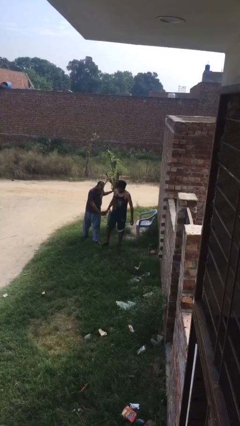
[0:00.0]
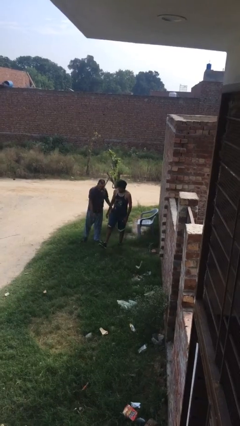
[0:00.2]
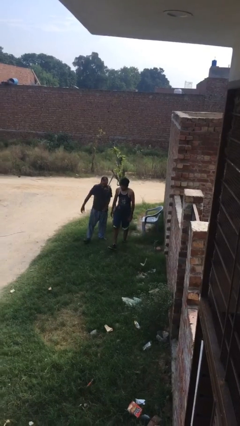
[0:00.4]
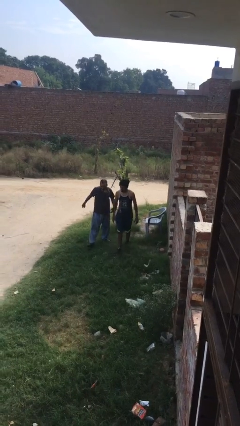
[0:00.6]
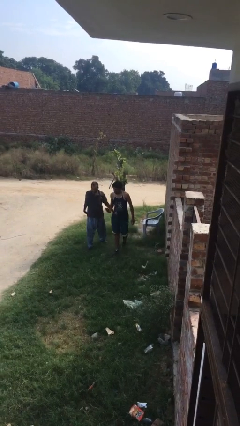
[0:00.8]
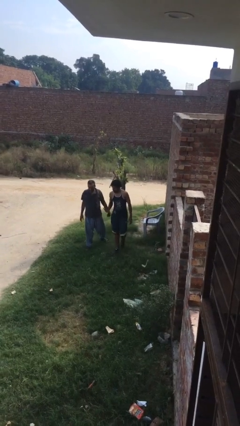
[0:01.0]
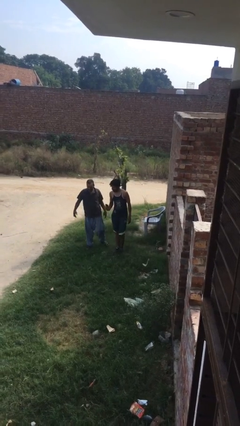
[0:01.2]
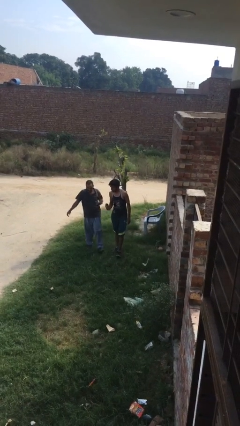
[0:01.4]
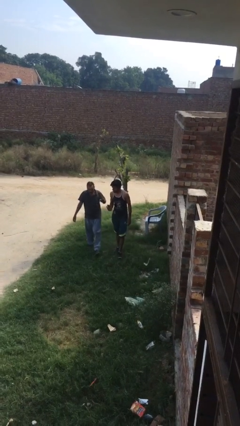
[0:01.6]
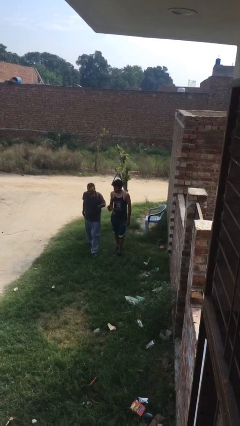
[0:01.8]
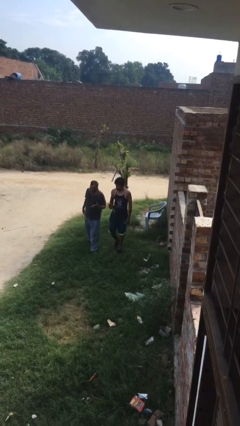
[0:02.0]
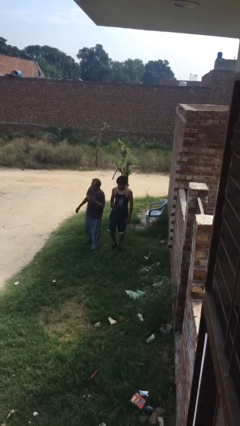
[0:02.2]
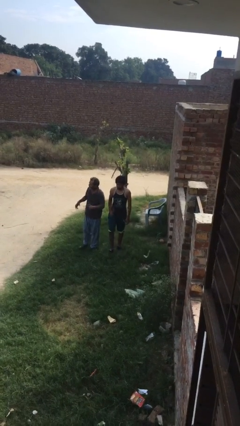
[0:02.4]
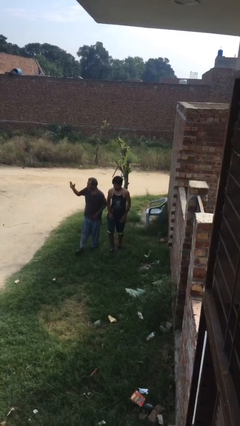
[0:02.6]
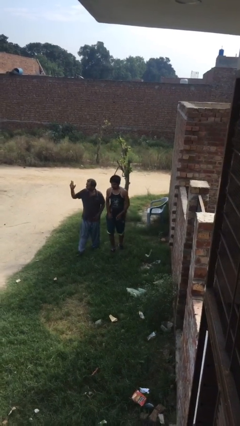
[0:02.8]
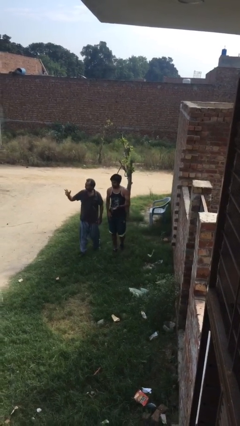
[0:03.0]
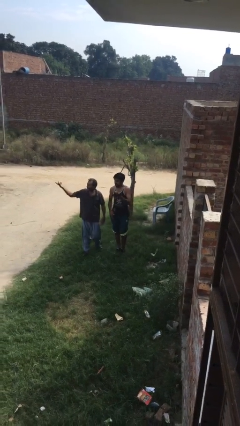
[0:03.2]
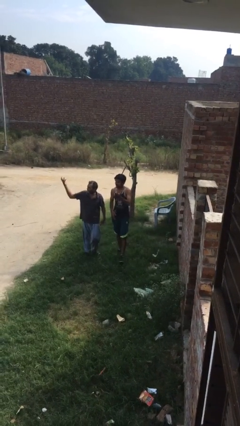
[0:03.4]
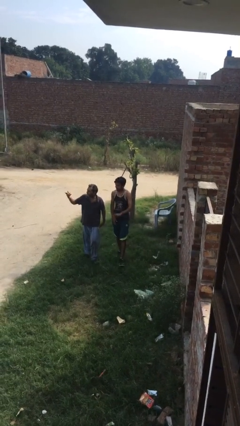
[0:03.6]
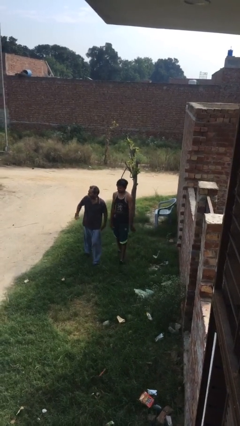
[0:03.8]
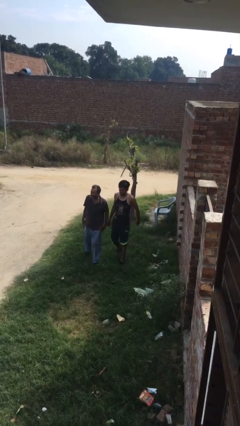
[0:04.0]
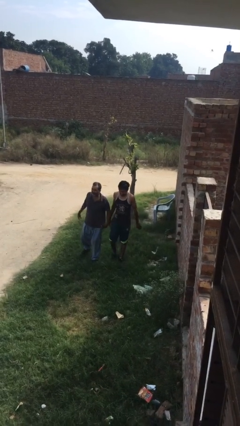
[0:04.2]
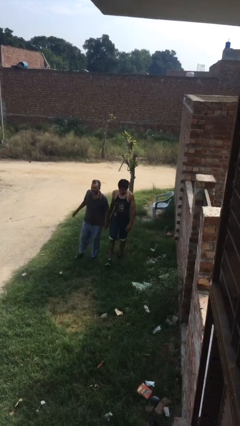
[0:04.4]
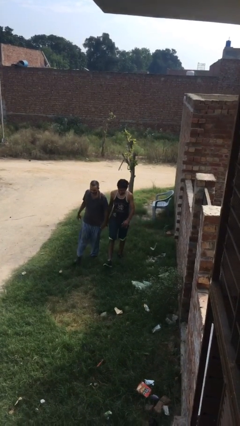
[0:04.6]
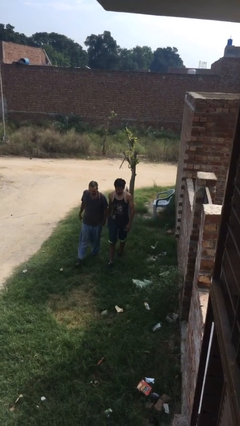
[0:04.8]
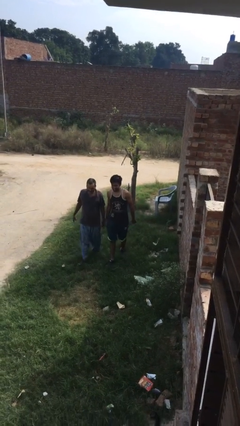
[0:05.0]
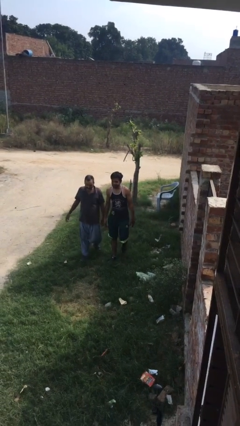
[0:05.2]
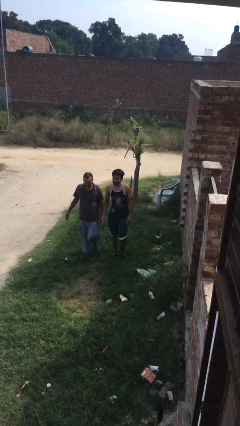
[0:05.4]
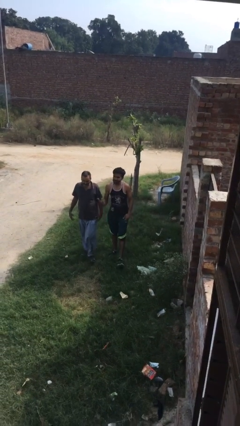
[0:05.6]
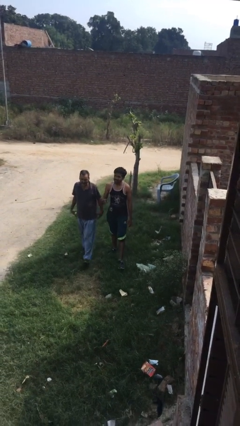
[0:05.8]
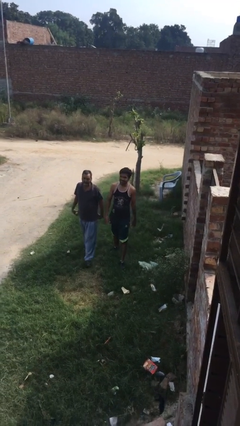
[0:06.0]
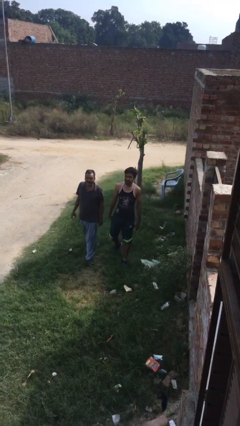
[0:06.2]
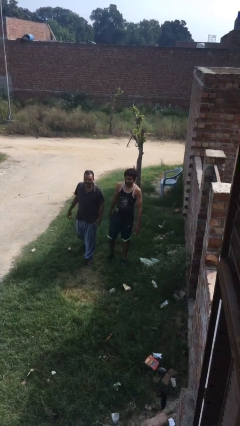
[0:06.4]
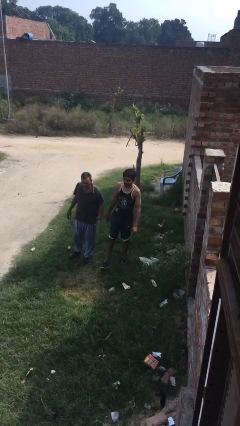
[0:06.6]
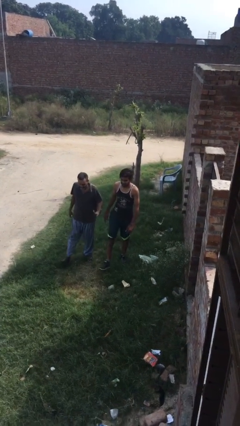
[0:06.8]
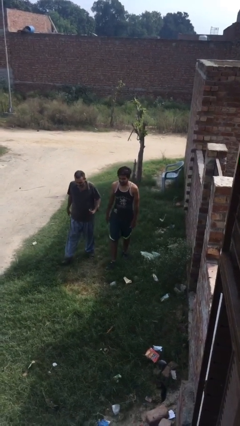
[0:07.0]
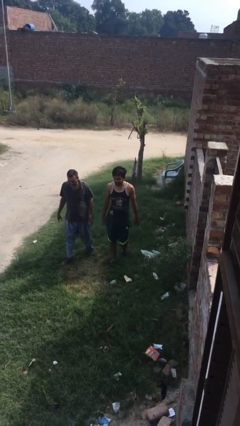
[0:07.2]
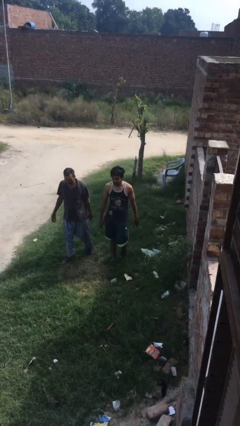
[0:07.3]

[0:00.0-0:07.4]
person talks to person

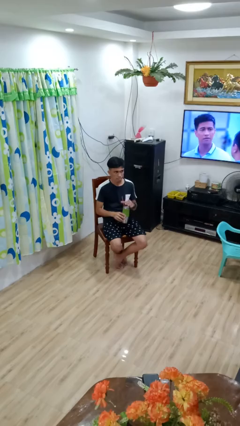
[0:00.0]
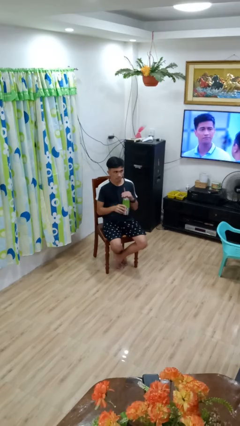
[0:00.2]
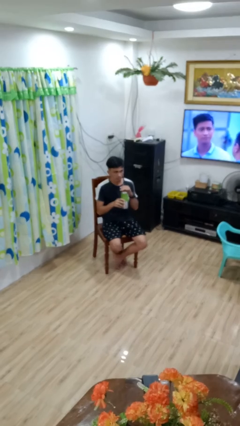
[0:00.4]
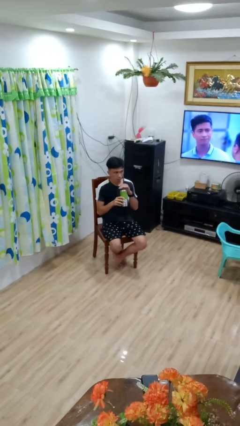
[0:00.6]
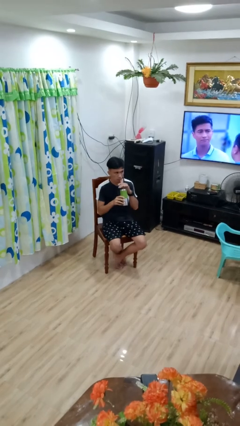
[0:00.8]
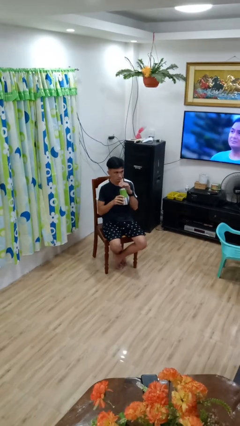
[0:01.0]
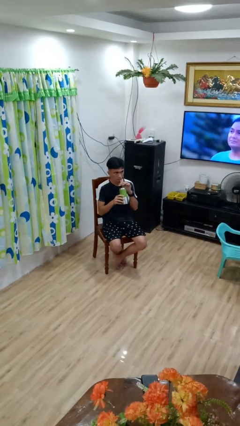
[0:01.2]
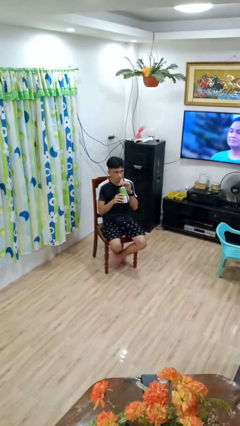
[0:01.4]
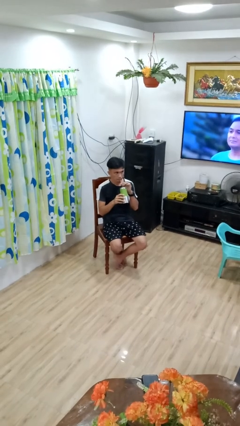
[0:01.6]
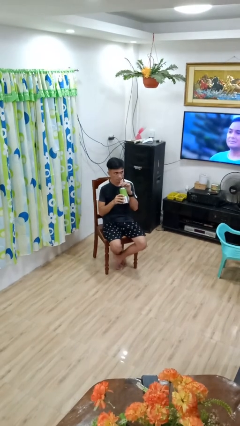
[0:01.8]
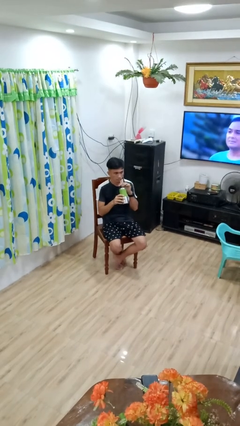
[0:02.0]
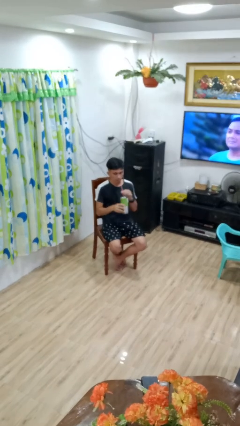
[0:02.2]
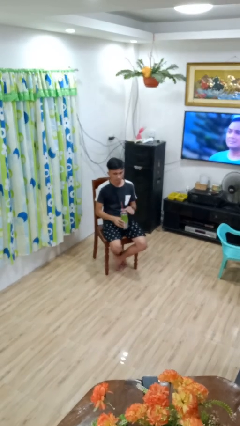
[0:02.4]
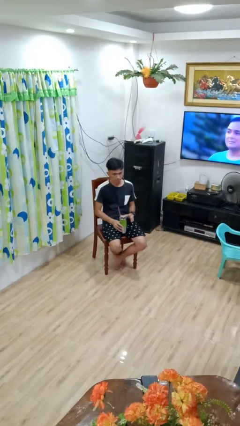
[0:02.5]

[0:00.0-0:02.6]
person drinks from straw

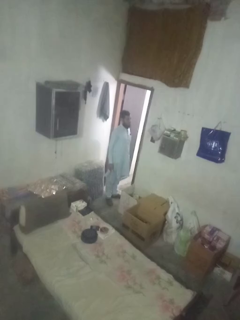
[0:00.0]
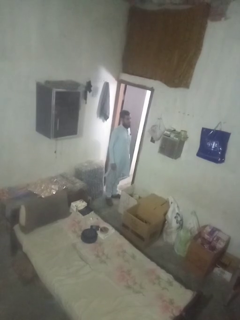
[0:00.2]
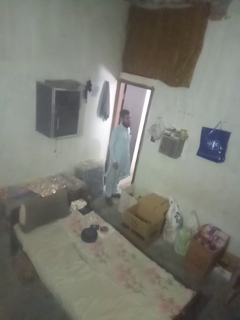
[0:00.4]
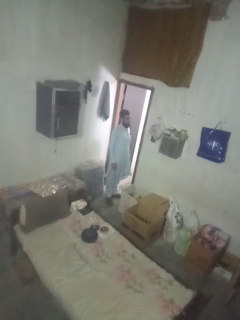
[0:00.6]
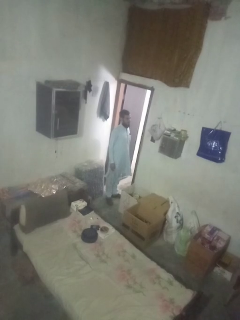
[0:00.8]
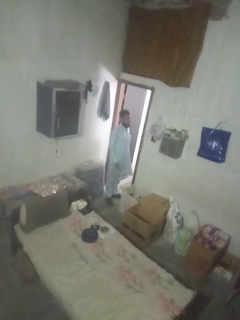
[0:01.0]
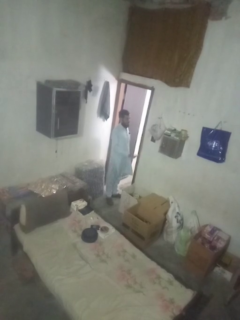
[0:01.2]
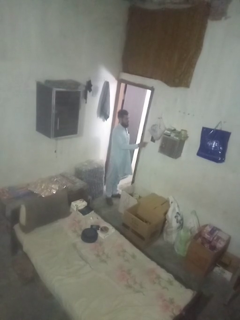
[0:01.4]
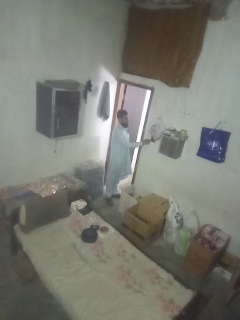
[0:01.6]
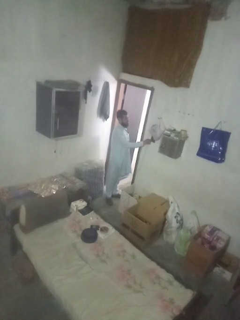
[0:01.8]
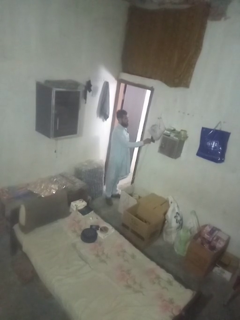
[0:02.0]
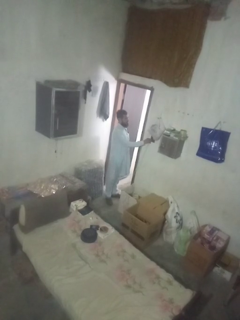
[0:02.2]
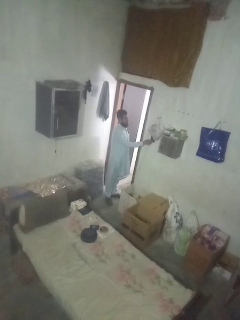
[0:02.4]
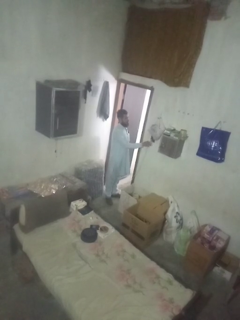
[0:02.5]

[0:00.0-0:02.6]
person plugs into electrical socket

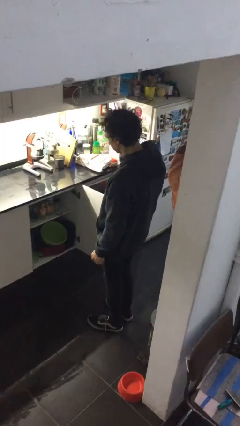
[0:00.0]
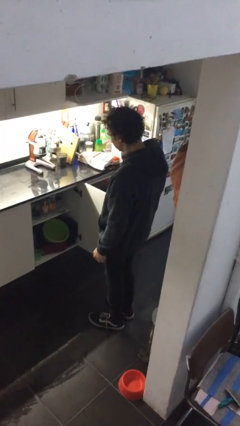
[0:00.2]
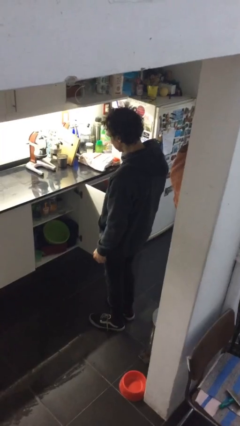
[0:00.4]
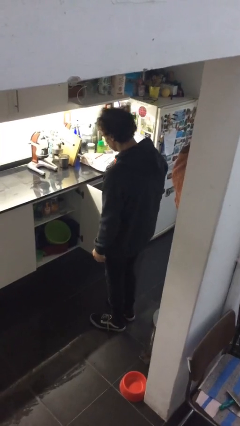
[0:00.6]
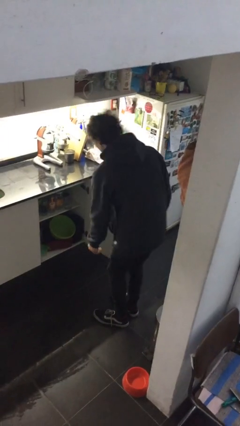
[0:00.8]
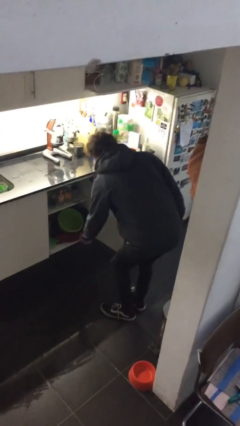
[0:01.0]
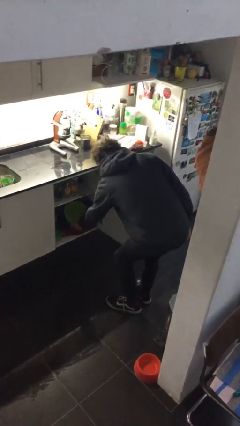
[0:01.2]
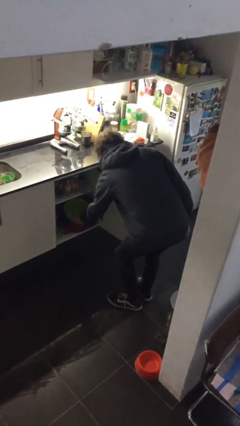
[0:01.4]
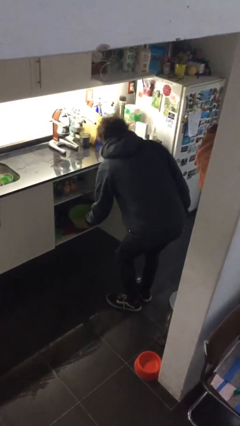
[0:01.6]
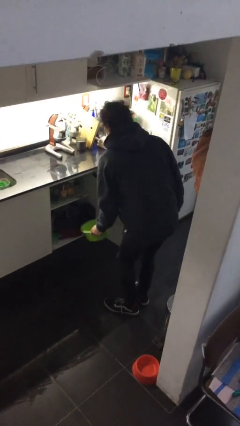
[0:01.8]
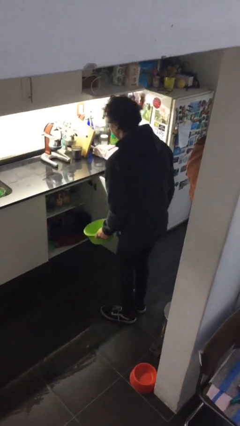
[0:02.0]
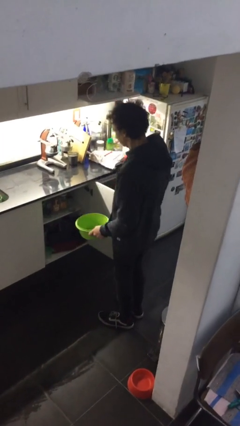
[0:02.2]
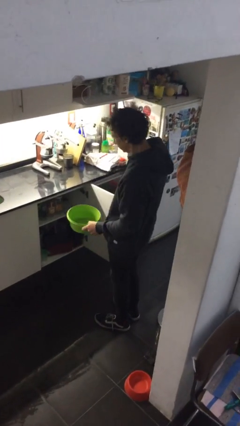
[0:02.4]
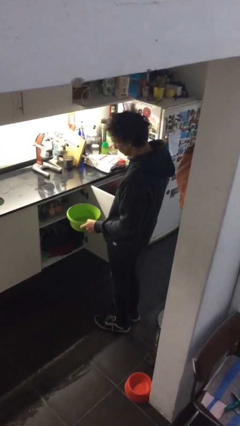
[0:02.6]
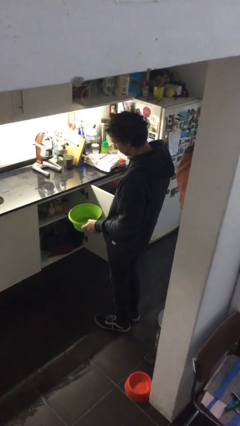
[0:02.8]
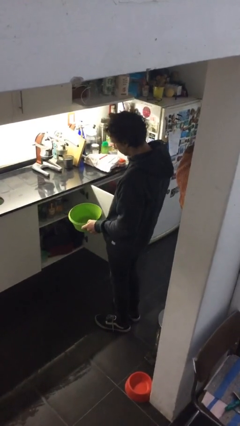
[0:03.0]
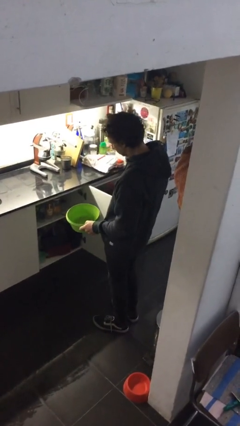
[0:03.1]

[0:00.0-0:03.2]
person picks up object from cabinet

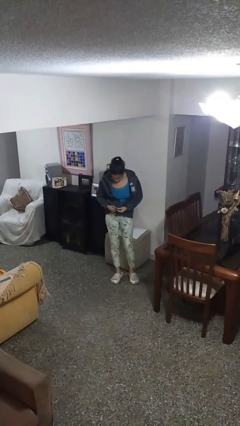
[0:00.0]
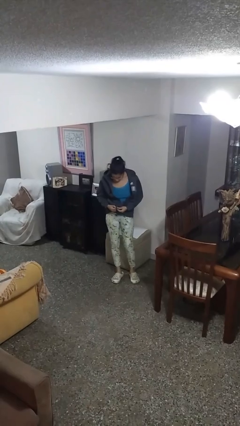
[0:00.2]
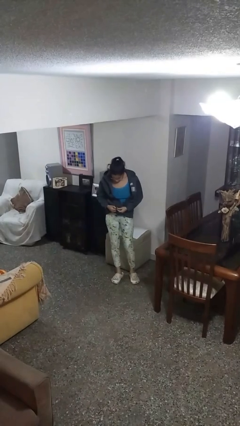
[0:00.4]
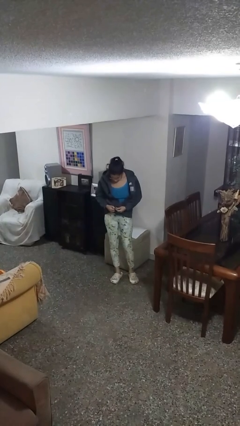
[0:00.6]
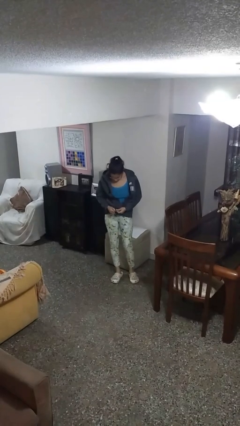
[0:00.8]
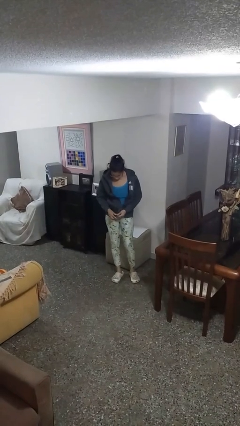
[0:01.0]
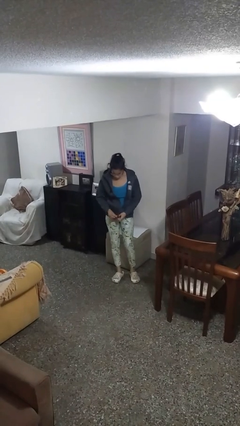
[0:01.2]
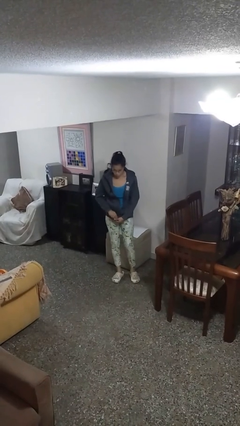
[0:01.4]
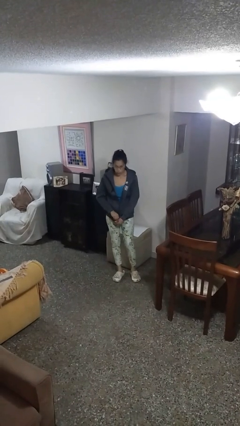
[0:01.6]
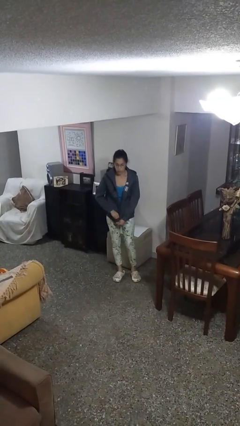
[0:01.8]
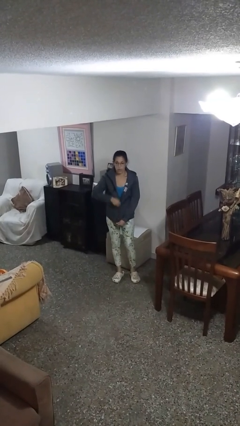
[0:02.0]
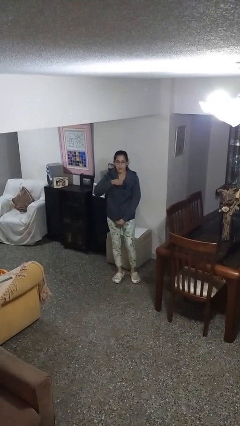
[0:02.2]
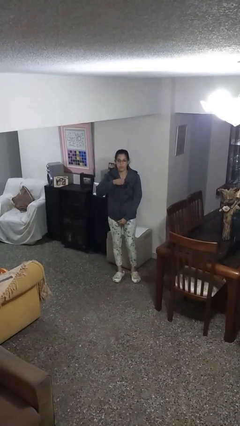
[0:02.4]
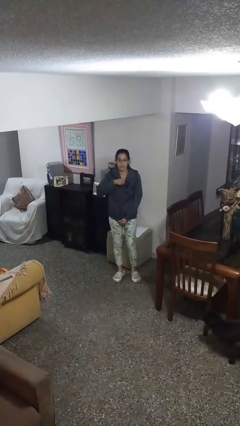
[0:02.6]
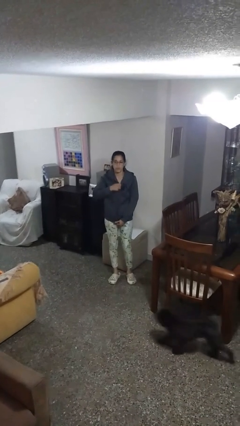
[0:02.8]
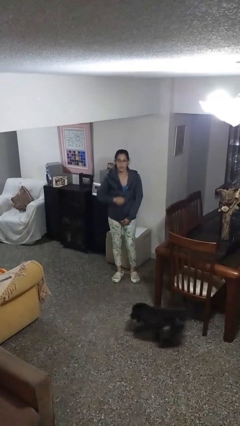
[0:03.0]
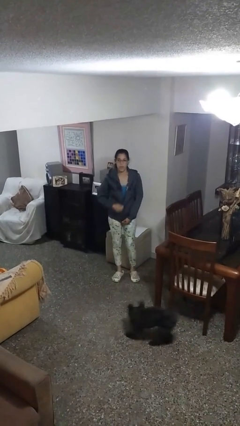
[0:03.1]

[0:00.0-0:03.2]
person zips up jacket
